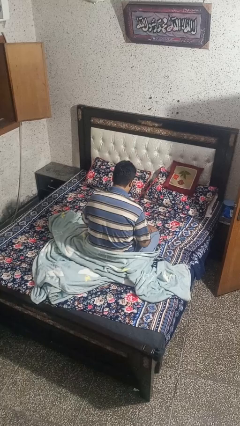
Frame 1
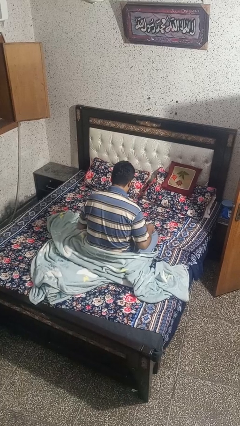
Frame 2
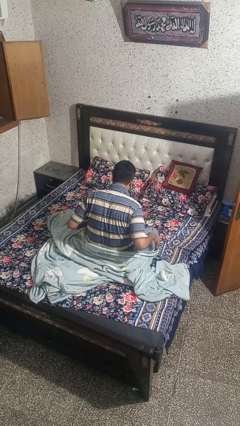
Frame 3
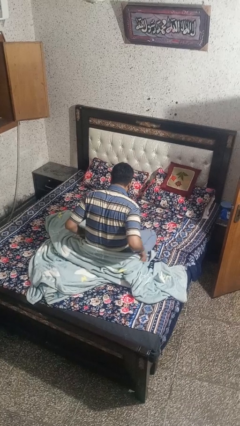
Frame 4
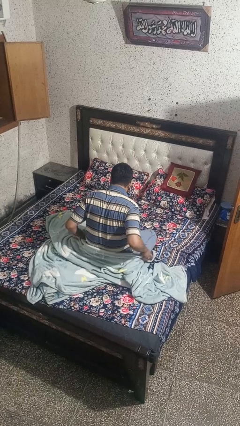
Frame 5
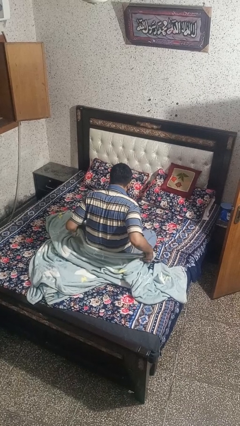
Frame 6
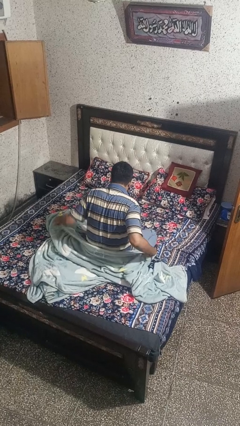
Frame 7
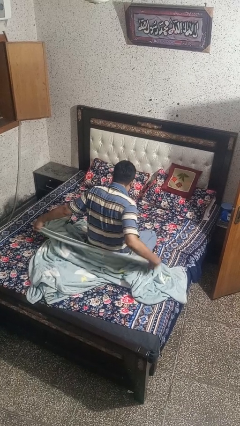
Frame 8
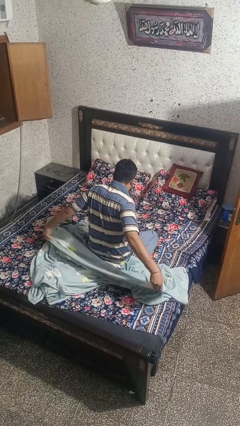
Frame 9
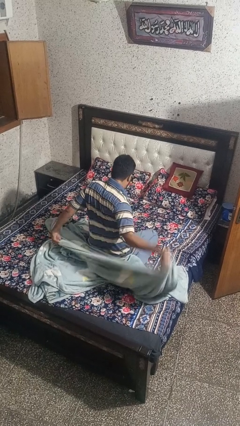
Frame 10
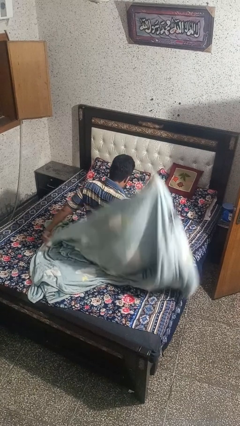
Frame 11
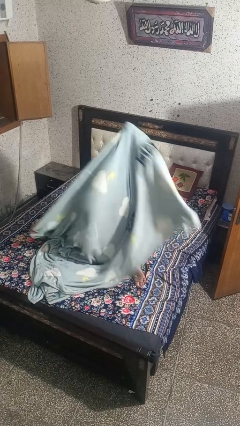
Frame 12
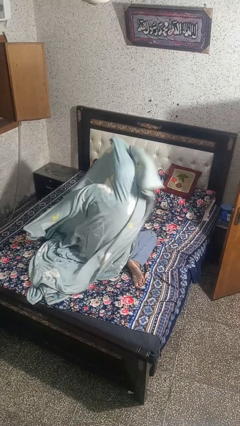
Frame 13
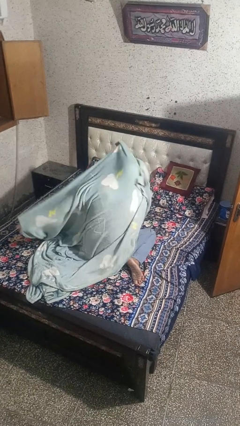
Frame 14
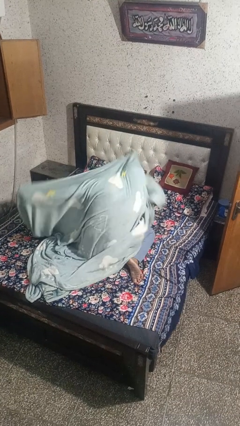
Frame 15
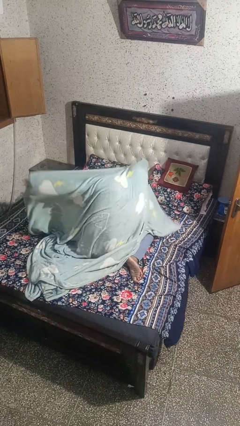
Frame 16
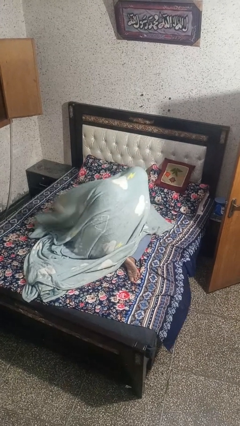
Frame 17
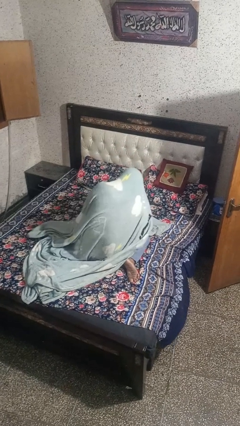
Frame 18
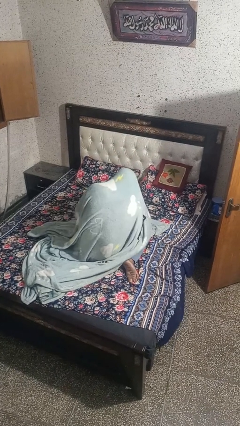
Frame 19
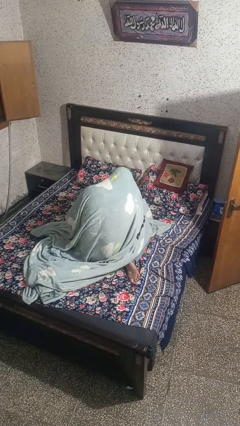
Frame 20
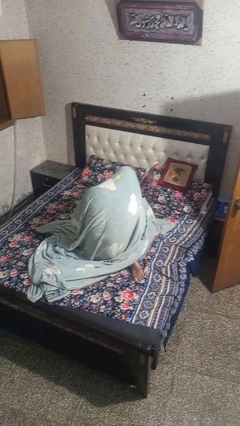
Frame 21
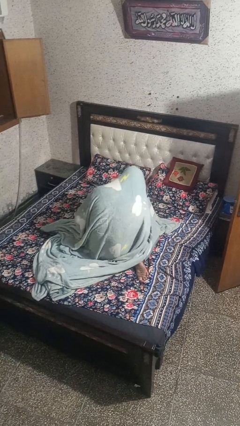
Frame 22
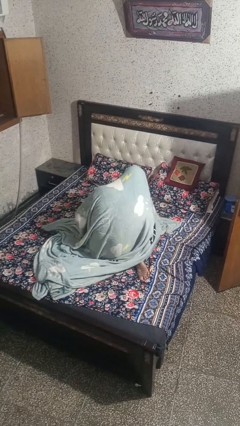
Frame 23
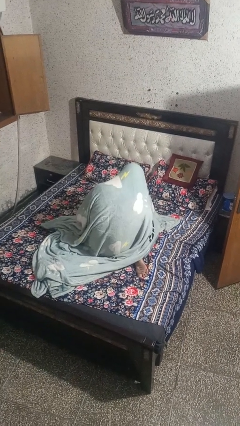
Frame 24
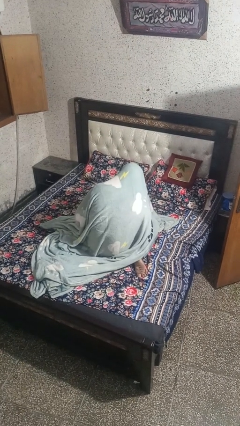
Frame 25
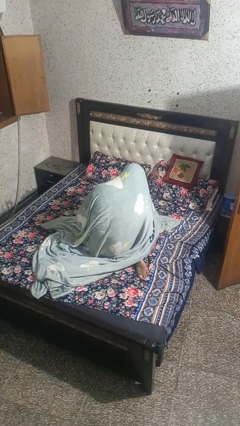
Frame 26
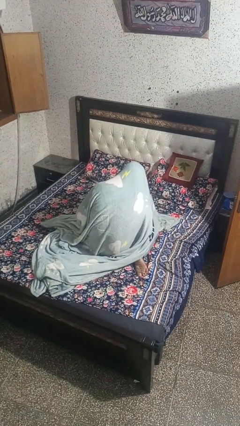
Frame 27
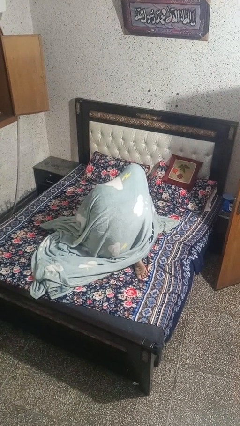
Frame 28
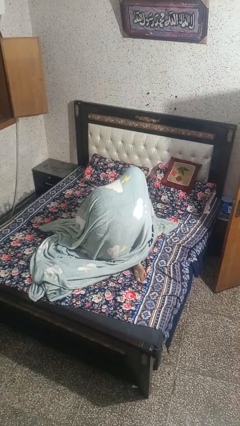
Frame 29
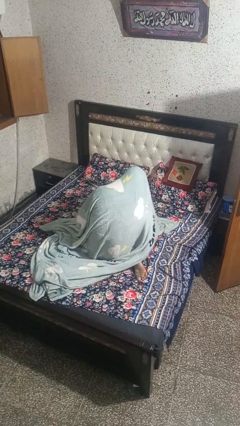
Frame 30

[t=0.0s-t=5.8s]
person covers with blanket

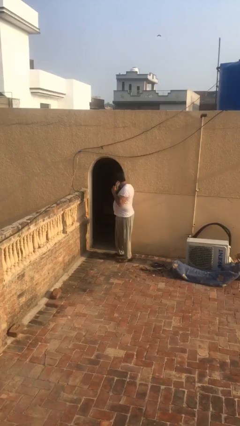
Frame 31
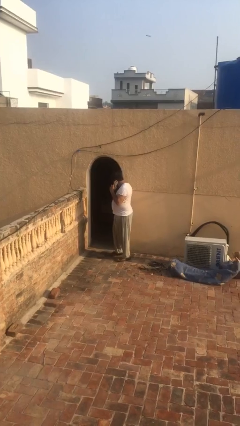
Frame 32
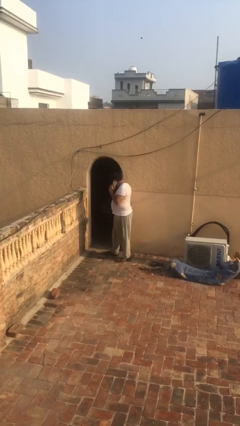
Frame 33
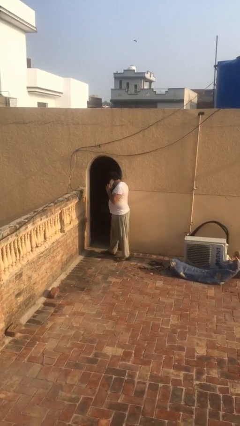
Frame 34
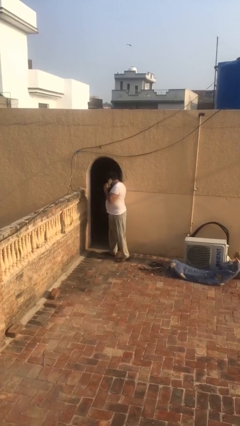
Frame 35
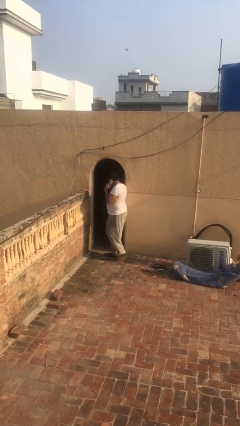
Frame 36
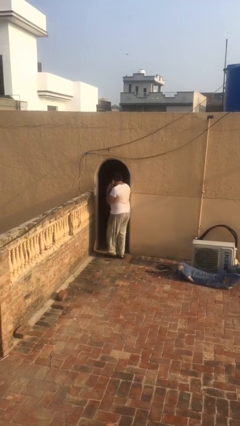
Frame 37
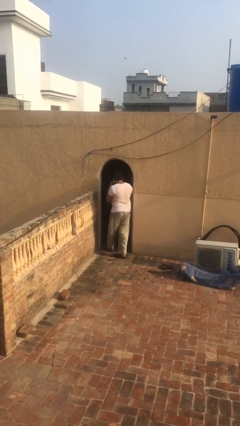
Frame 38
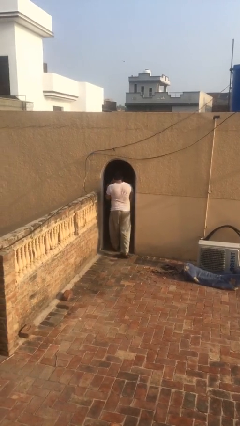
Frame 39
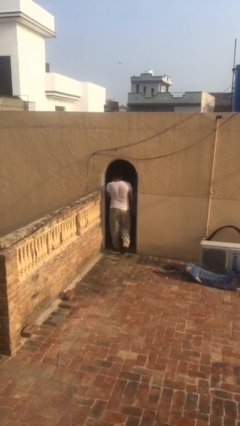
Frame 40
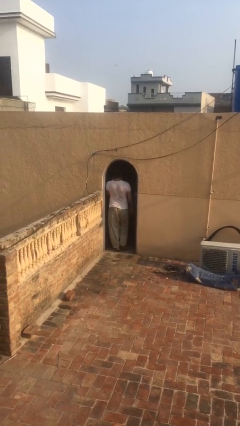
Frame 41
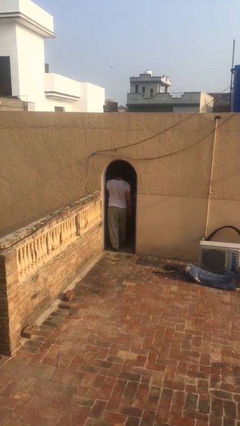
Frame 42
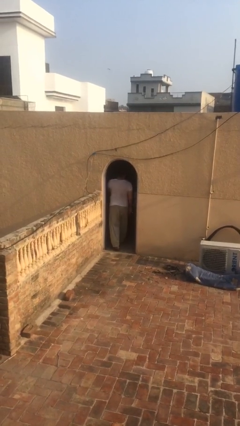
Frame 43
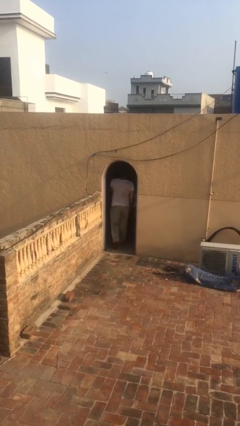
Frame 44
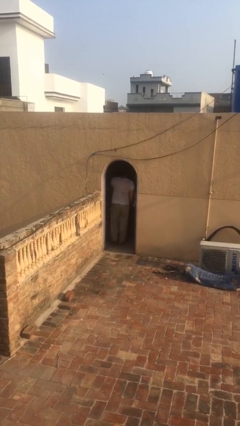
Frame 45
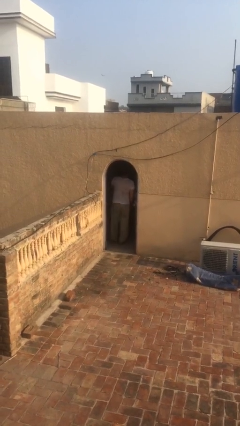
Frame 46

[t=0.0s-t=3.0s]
person exits scene through structure

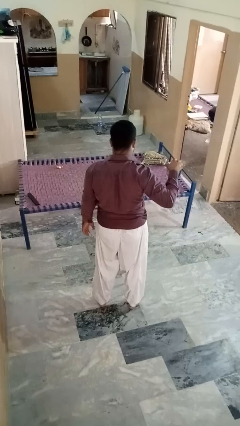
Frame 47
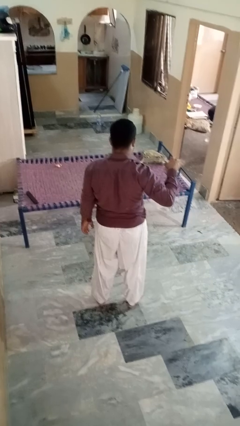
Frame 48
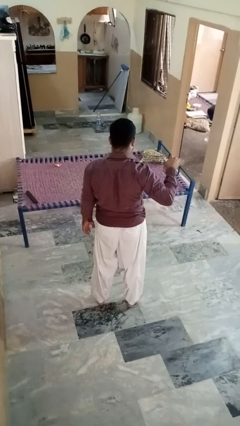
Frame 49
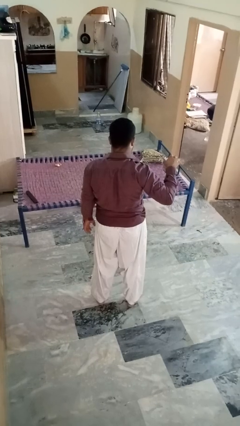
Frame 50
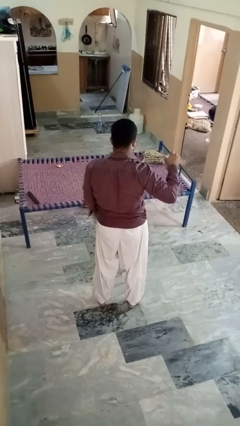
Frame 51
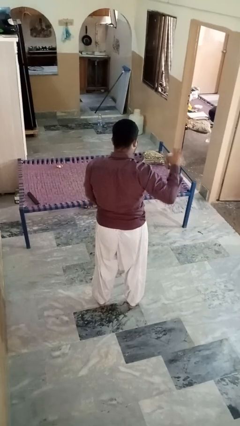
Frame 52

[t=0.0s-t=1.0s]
person drops object

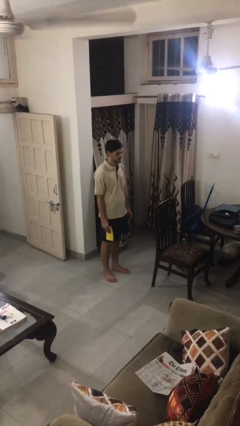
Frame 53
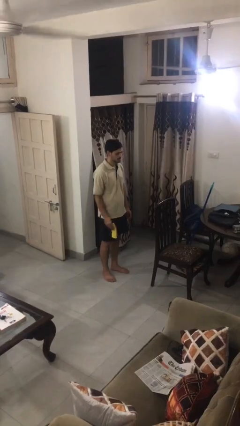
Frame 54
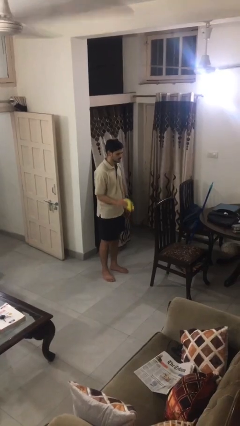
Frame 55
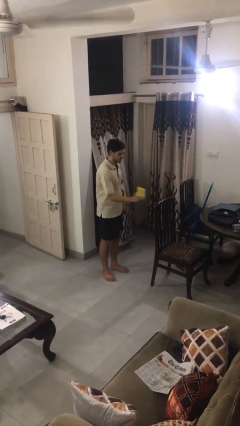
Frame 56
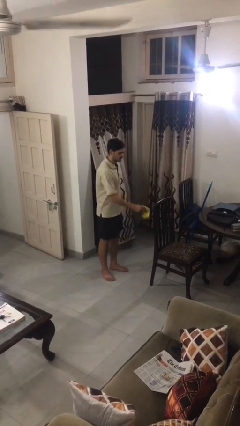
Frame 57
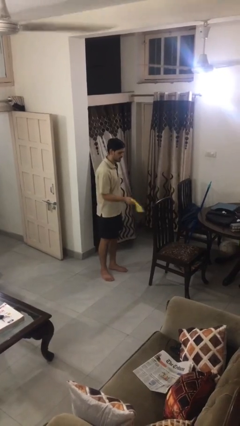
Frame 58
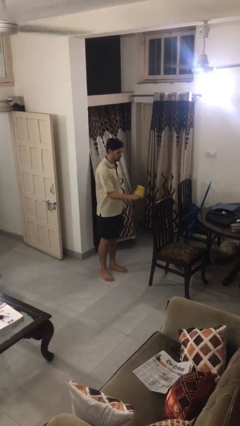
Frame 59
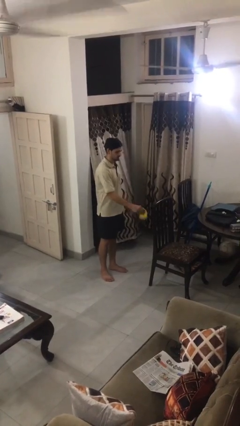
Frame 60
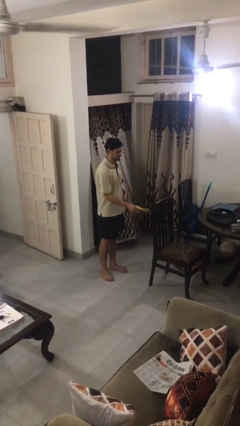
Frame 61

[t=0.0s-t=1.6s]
person dusts furniture

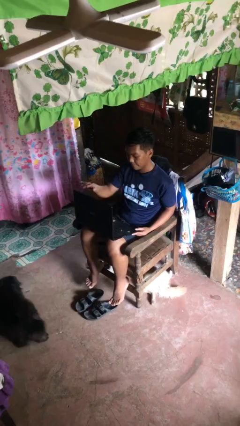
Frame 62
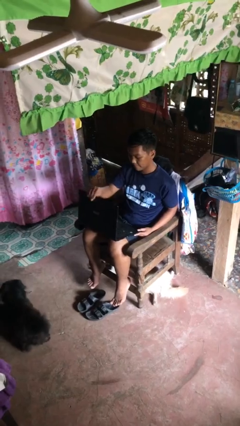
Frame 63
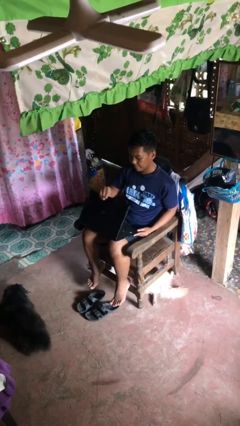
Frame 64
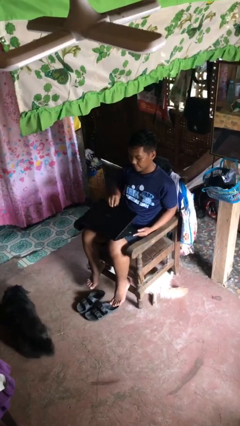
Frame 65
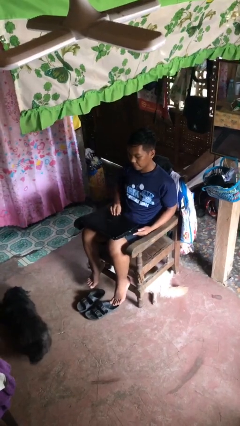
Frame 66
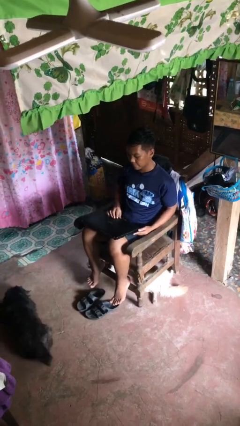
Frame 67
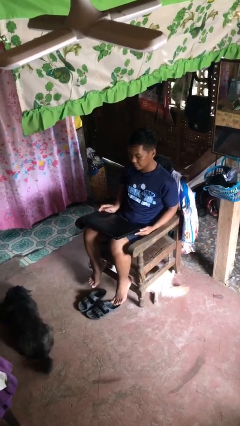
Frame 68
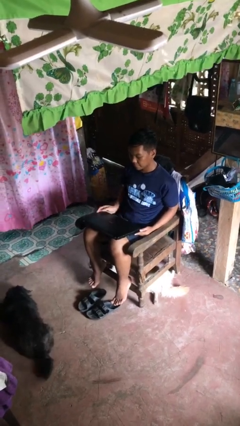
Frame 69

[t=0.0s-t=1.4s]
person closes laptop

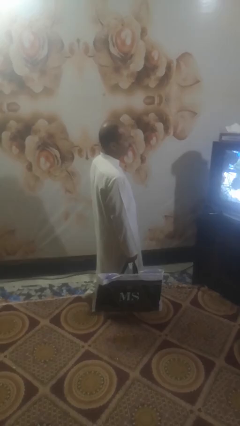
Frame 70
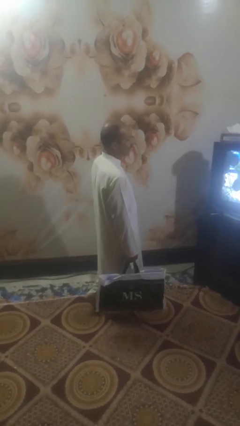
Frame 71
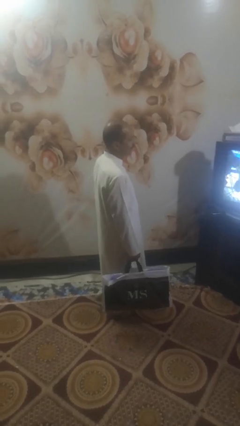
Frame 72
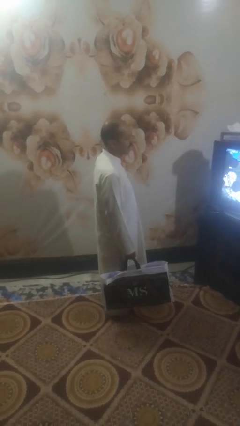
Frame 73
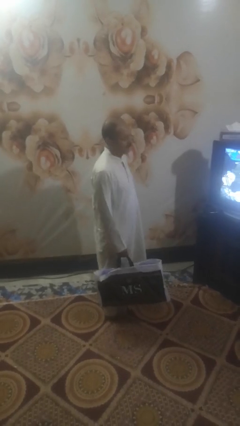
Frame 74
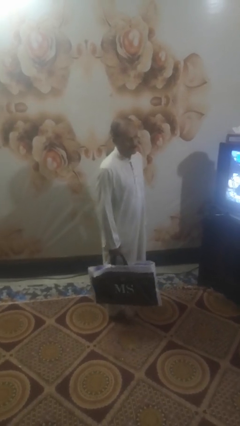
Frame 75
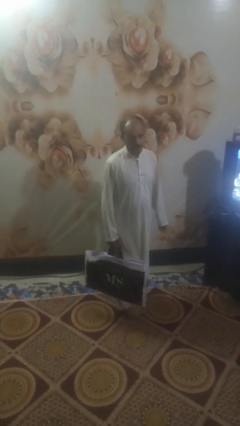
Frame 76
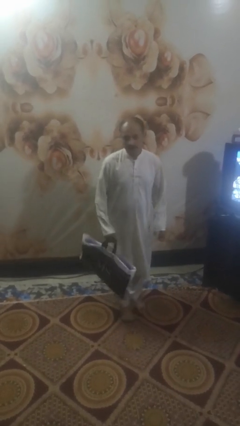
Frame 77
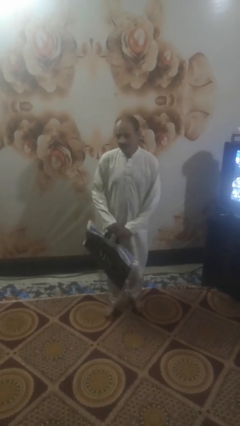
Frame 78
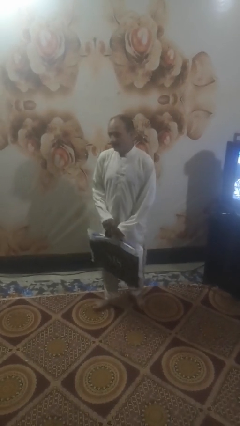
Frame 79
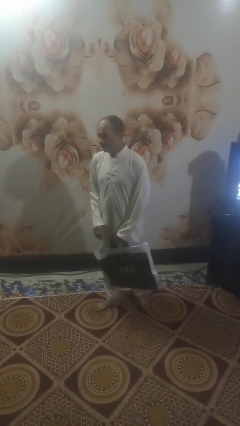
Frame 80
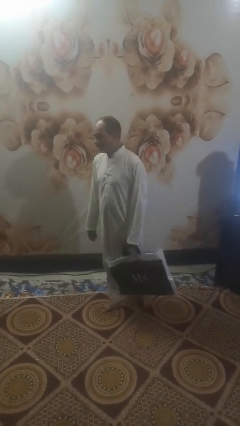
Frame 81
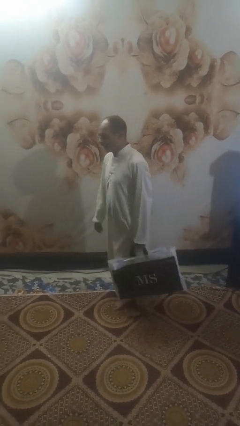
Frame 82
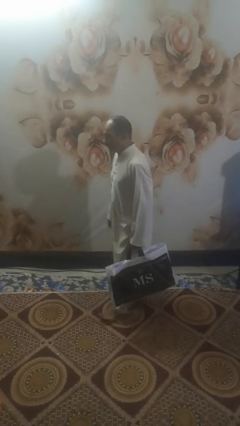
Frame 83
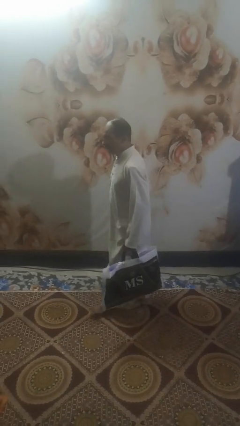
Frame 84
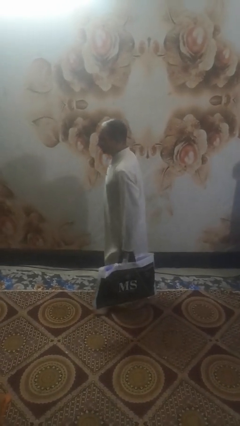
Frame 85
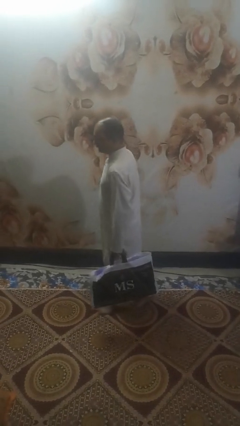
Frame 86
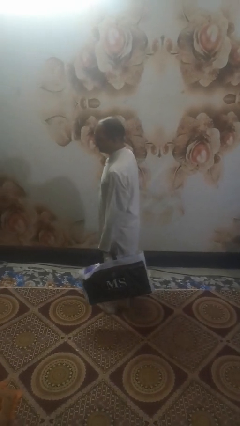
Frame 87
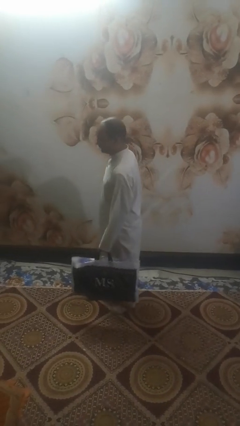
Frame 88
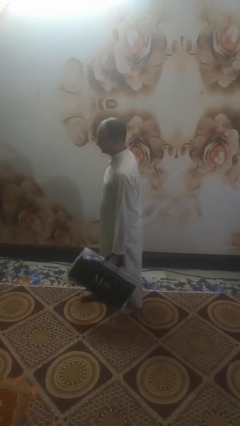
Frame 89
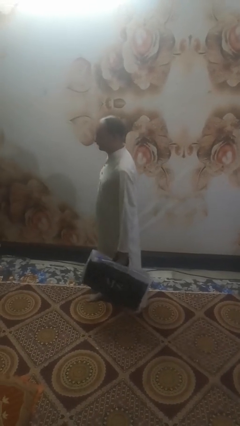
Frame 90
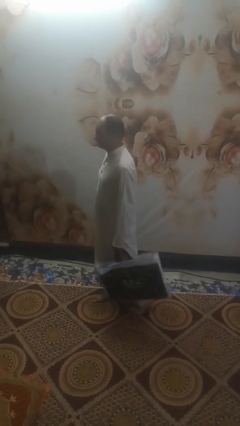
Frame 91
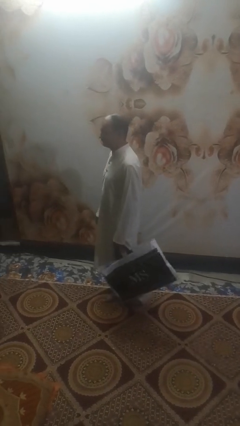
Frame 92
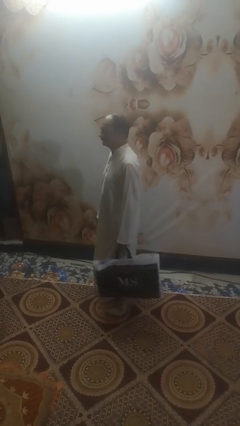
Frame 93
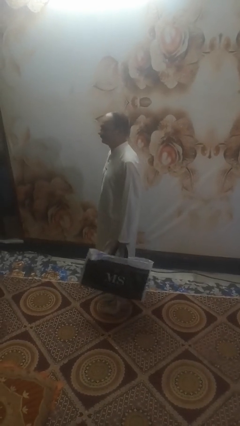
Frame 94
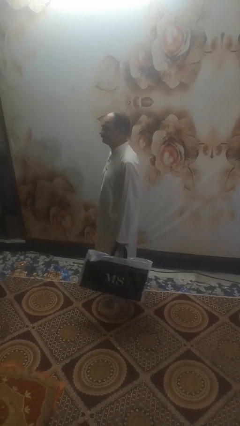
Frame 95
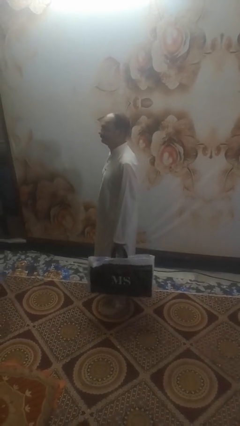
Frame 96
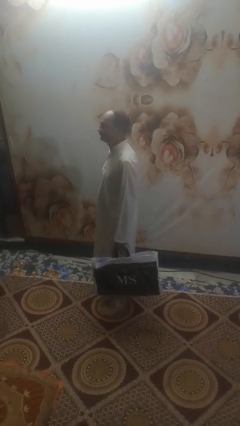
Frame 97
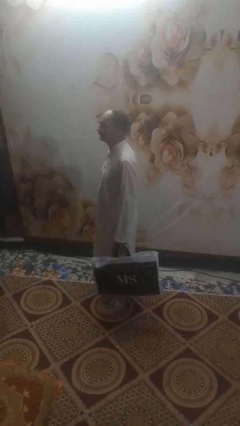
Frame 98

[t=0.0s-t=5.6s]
person carries groceries
